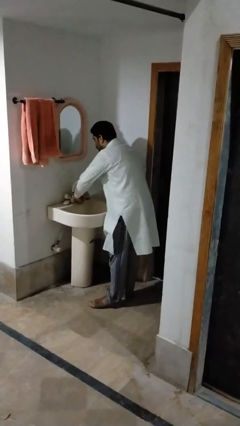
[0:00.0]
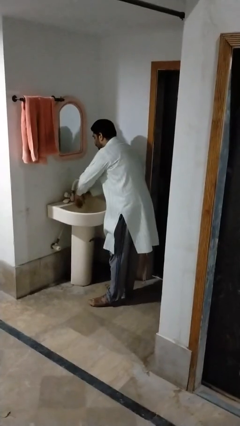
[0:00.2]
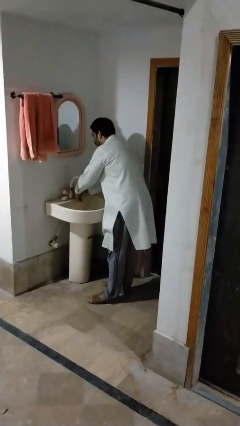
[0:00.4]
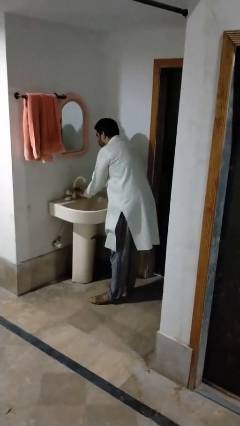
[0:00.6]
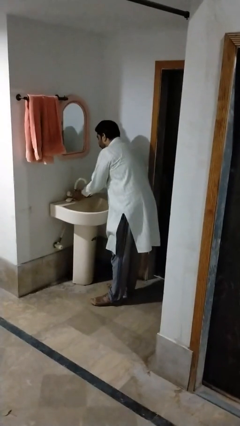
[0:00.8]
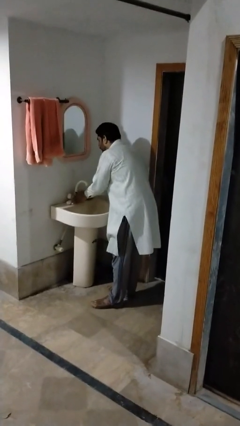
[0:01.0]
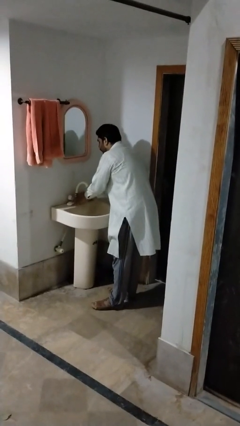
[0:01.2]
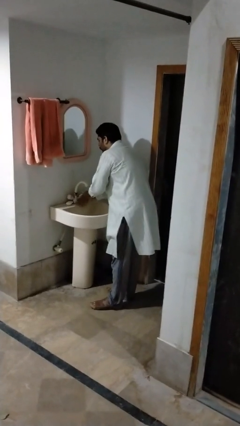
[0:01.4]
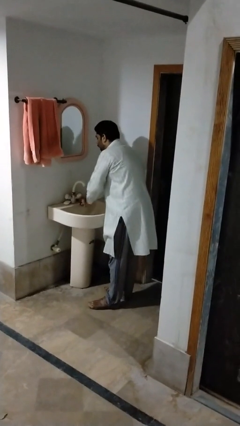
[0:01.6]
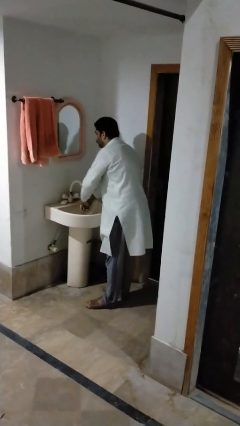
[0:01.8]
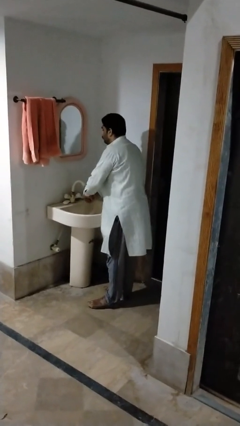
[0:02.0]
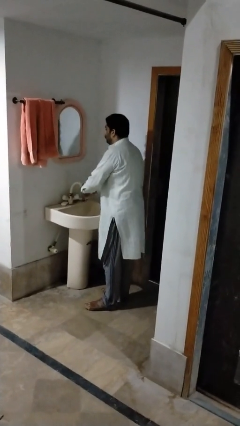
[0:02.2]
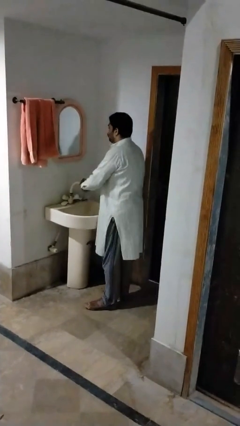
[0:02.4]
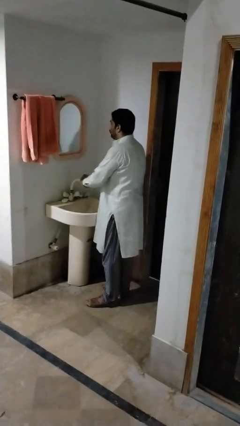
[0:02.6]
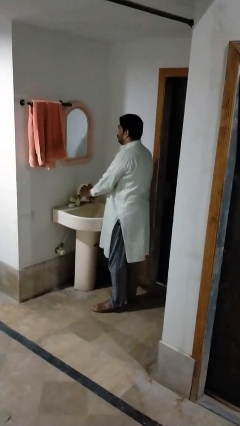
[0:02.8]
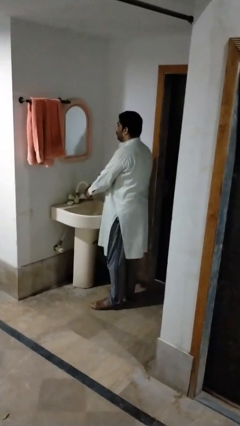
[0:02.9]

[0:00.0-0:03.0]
person washes hands

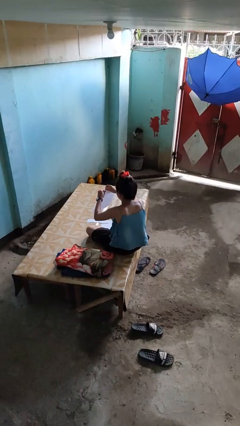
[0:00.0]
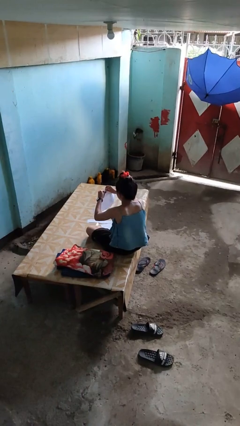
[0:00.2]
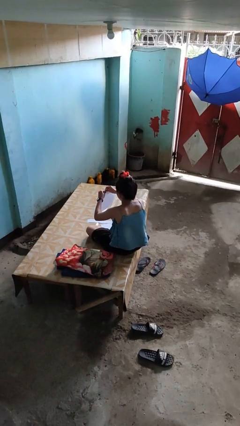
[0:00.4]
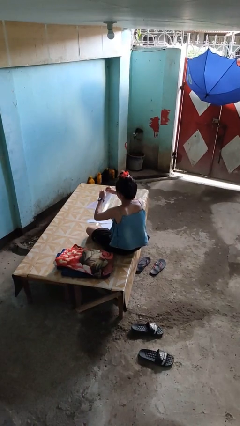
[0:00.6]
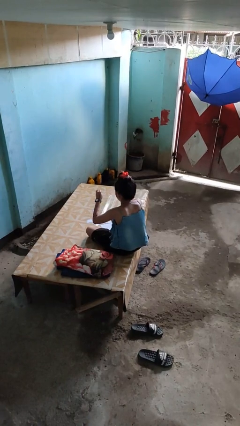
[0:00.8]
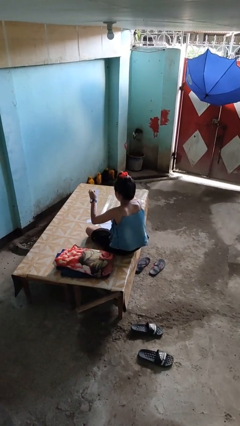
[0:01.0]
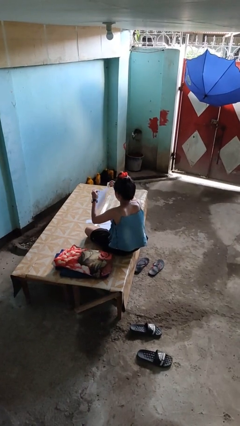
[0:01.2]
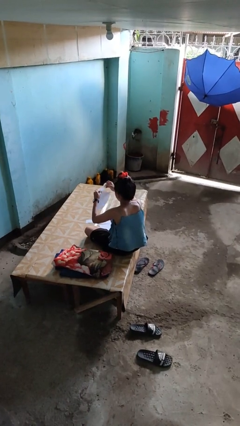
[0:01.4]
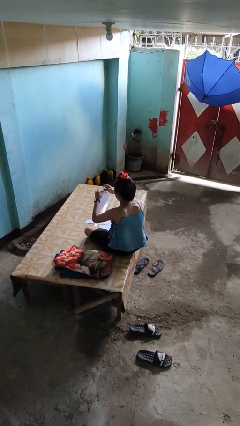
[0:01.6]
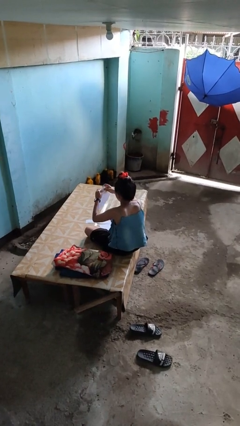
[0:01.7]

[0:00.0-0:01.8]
person tears paper

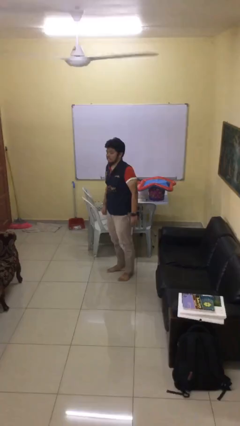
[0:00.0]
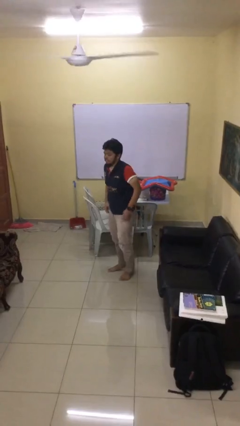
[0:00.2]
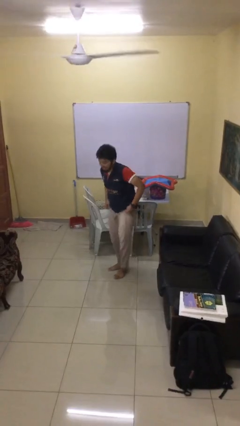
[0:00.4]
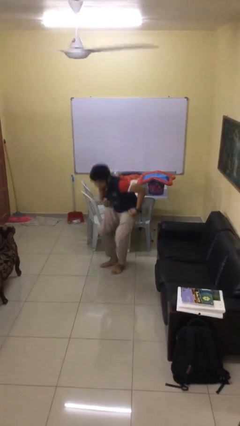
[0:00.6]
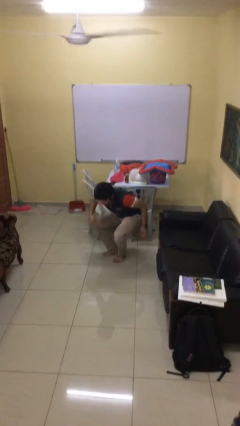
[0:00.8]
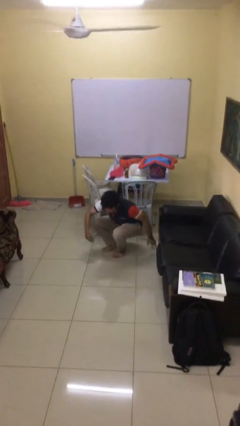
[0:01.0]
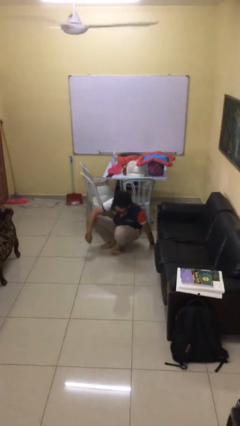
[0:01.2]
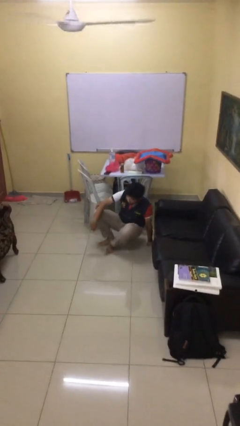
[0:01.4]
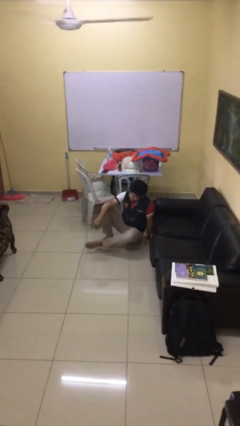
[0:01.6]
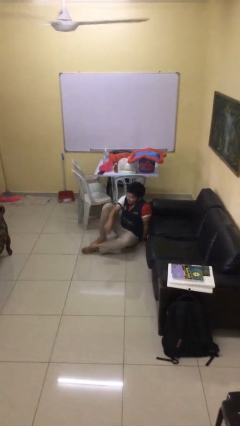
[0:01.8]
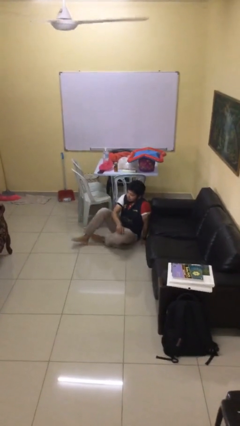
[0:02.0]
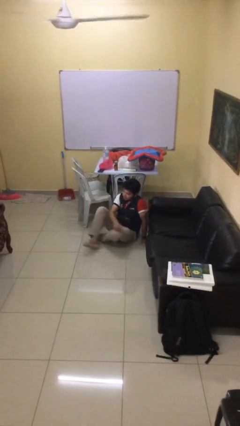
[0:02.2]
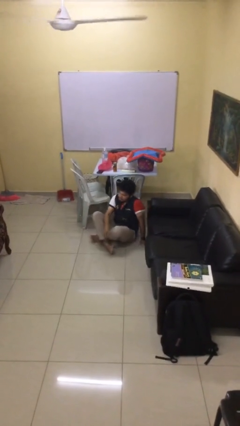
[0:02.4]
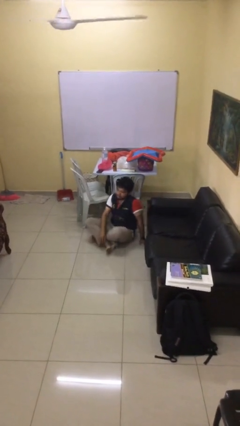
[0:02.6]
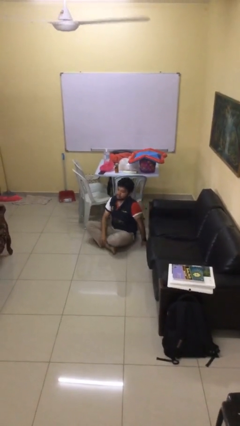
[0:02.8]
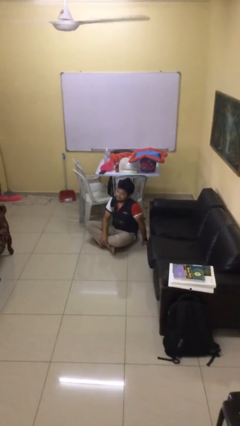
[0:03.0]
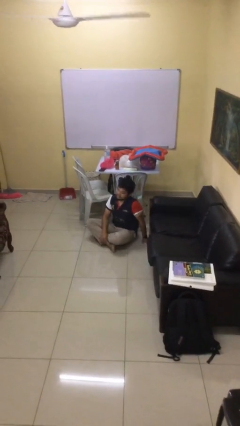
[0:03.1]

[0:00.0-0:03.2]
person sits crisscross

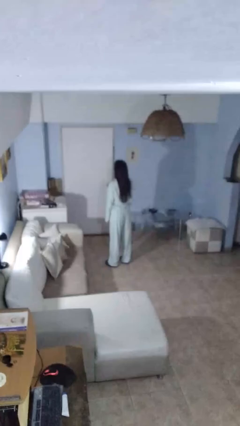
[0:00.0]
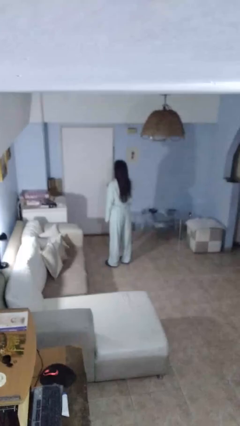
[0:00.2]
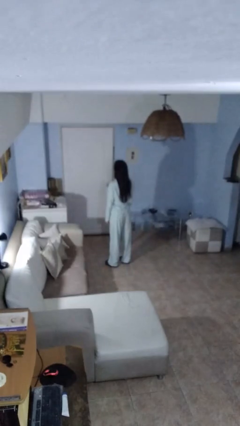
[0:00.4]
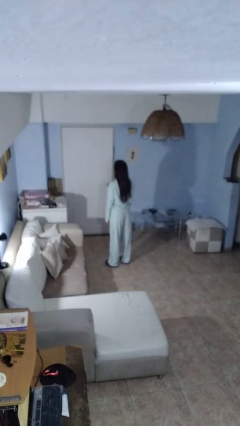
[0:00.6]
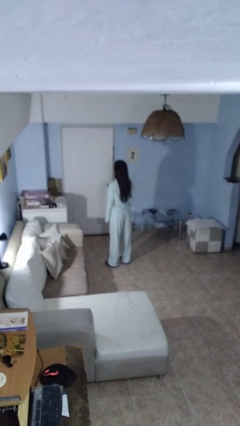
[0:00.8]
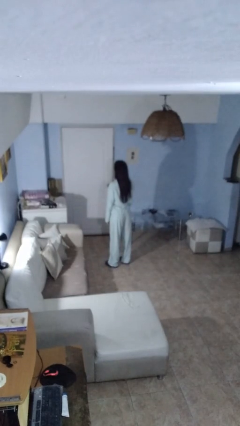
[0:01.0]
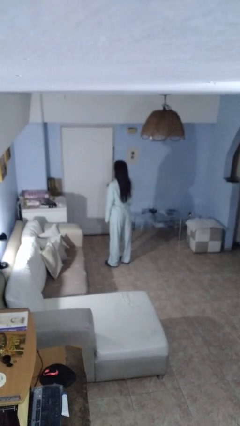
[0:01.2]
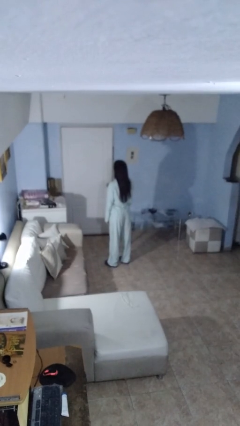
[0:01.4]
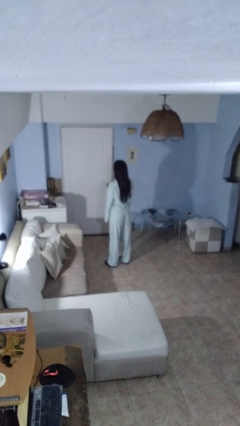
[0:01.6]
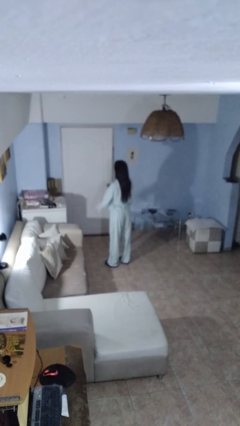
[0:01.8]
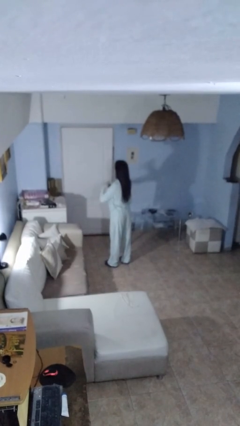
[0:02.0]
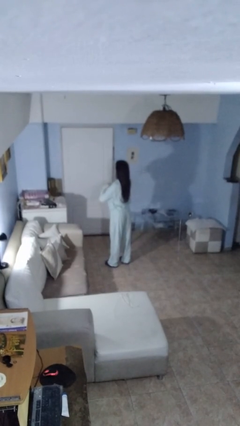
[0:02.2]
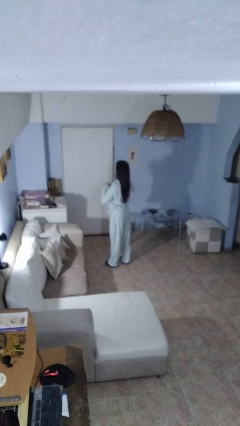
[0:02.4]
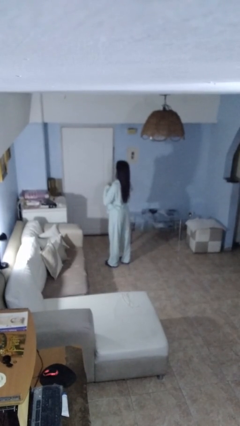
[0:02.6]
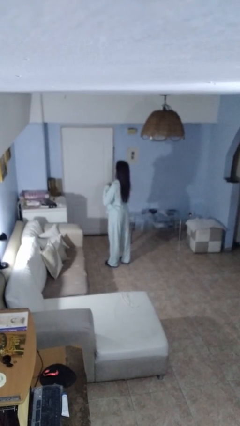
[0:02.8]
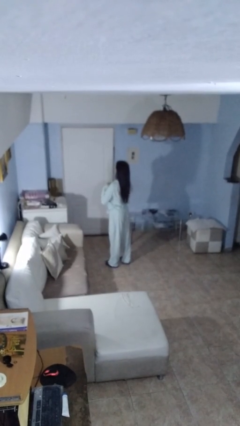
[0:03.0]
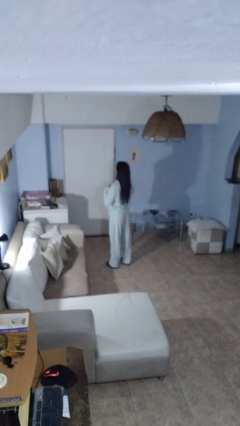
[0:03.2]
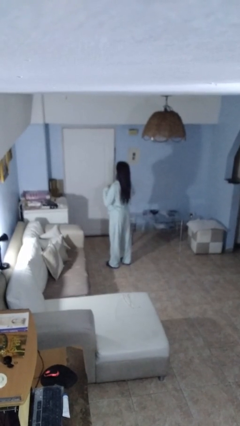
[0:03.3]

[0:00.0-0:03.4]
person drums on chest

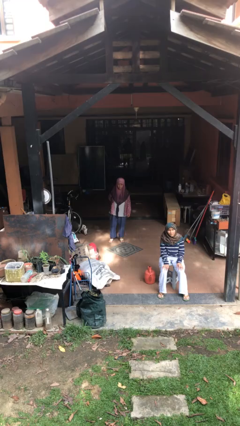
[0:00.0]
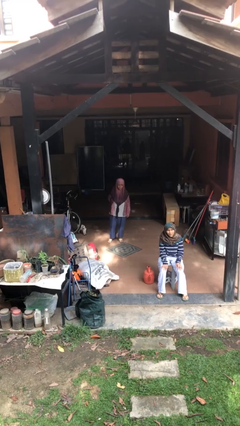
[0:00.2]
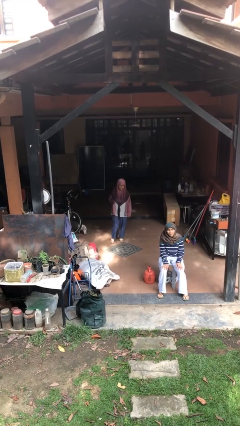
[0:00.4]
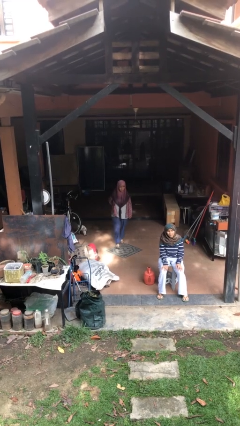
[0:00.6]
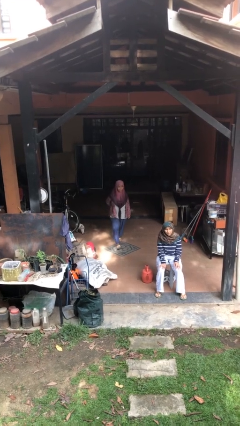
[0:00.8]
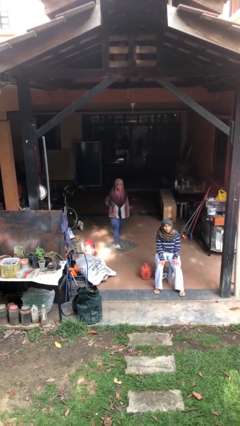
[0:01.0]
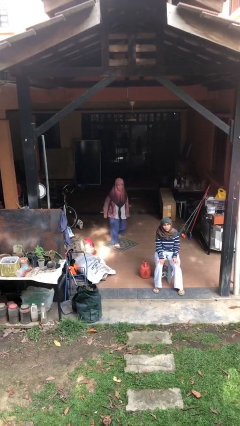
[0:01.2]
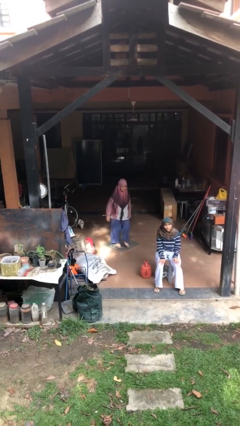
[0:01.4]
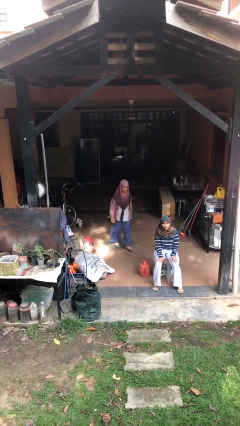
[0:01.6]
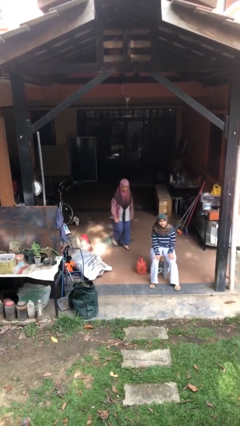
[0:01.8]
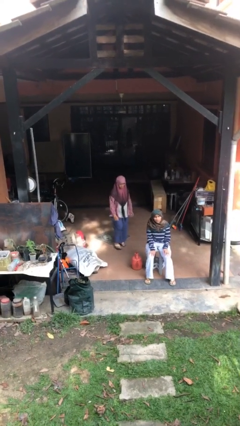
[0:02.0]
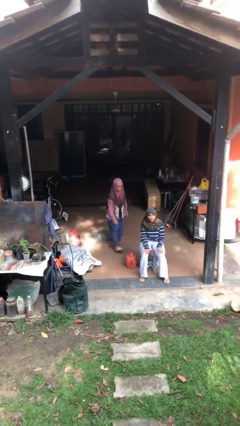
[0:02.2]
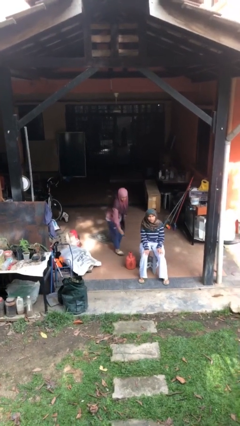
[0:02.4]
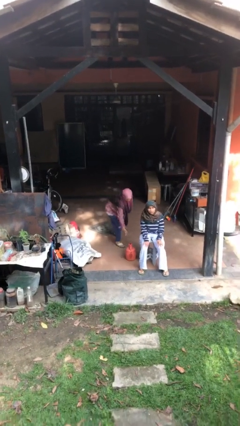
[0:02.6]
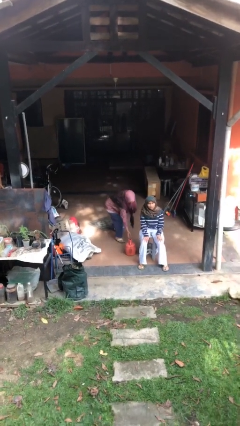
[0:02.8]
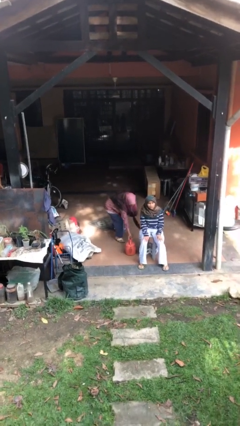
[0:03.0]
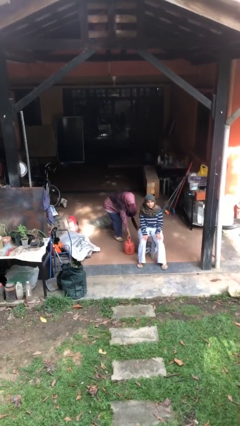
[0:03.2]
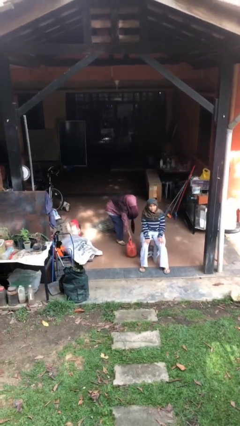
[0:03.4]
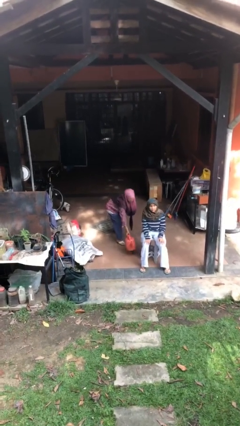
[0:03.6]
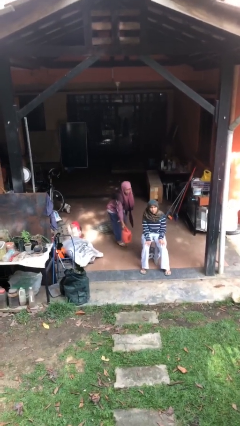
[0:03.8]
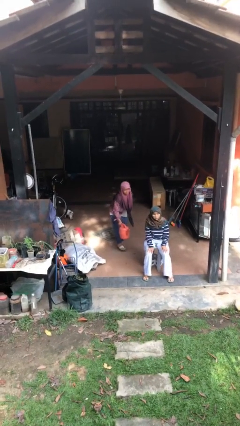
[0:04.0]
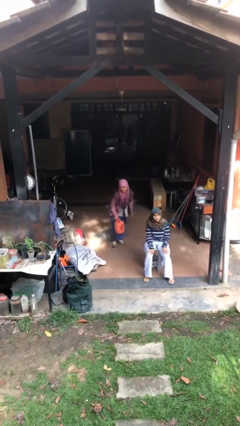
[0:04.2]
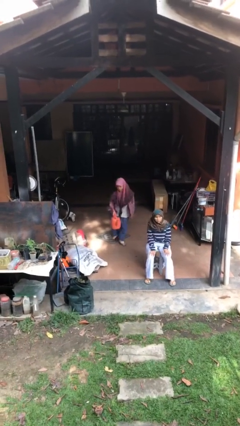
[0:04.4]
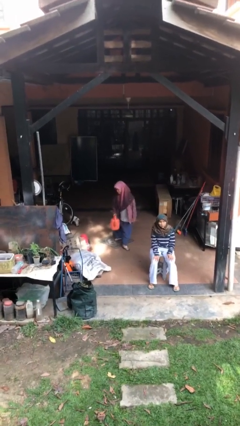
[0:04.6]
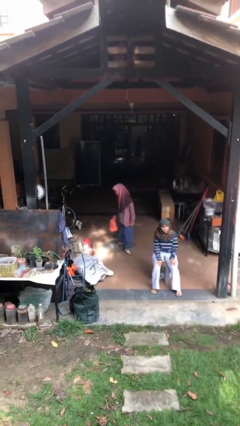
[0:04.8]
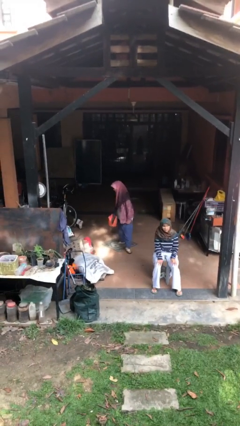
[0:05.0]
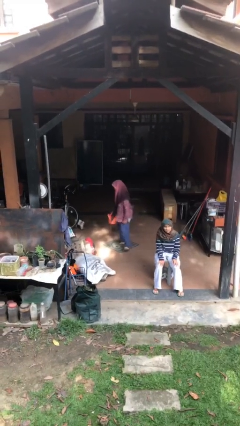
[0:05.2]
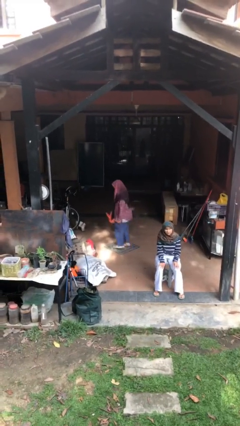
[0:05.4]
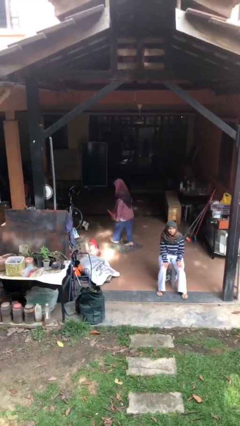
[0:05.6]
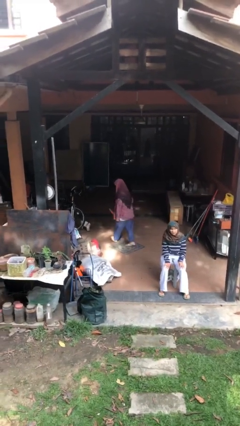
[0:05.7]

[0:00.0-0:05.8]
person steals object from person

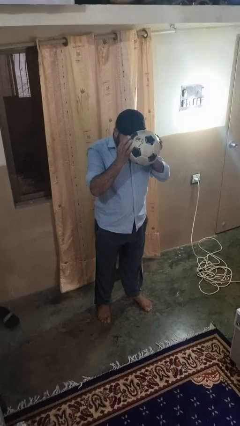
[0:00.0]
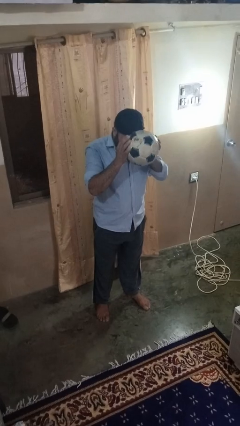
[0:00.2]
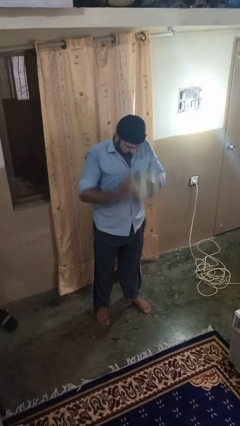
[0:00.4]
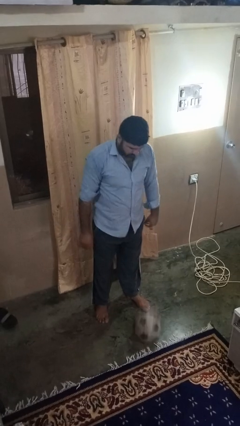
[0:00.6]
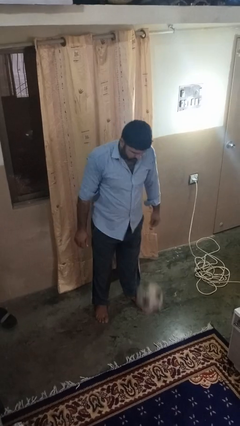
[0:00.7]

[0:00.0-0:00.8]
person bounces ball on floor
